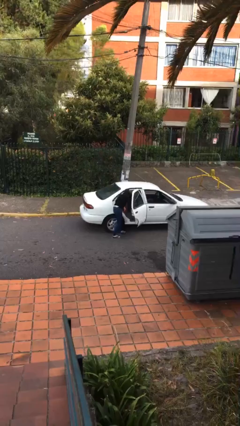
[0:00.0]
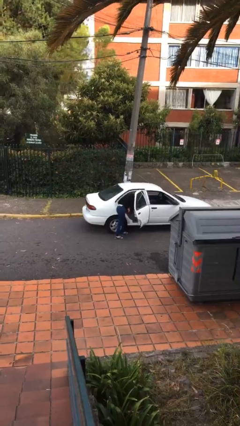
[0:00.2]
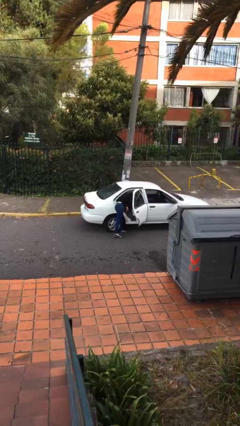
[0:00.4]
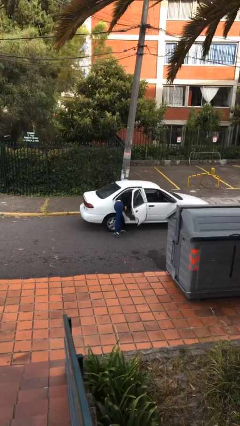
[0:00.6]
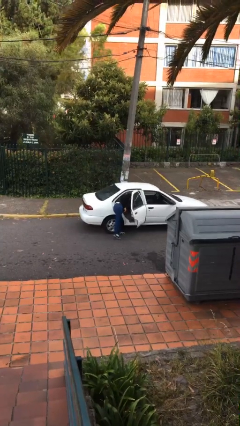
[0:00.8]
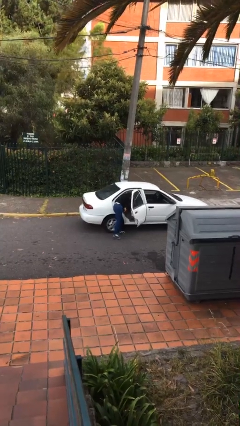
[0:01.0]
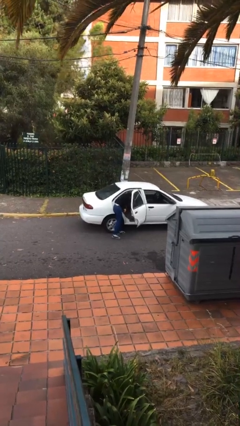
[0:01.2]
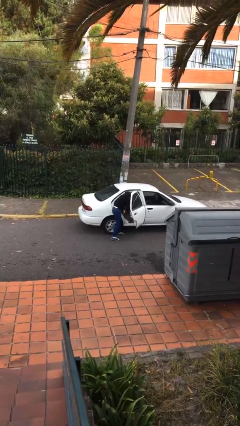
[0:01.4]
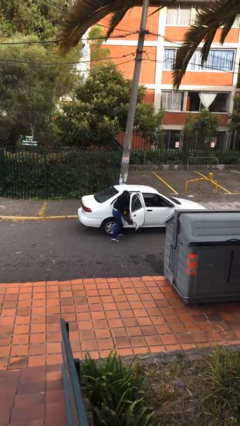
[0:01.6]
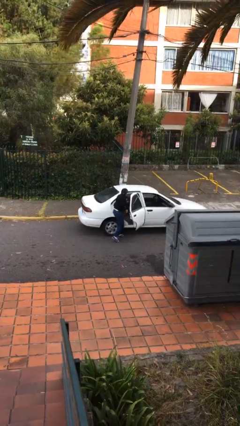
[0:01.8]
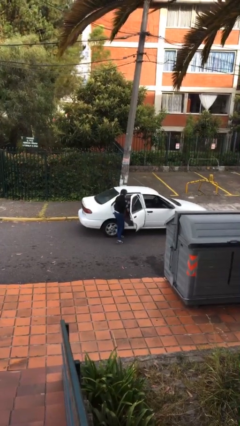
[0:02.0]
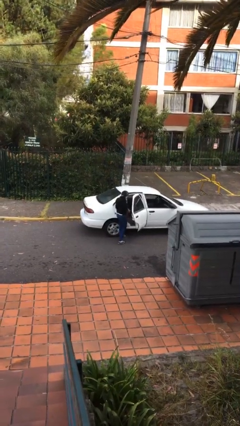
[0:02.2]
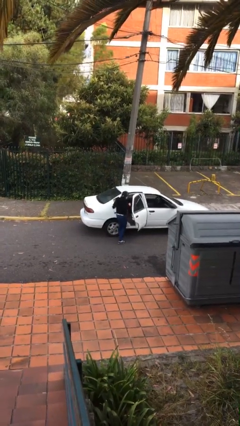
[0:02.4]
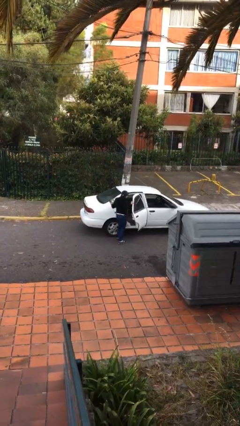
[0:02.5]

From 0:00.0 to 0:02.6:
person unloads car

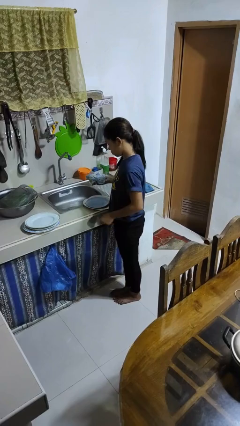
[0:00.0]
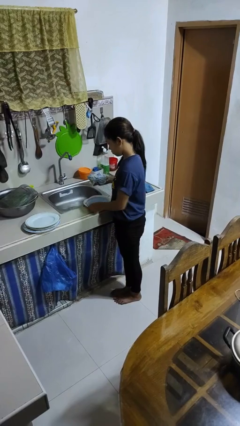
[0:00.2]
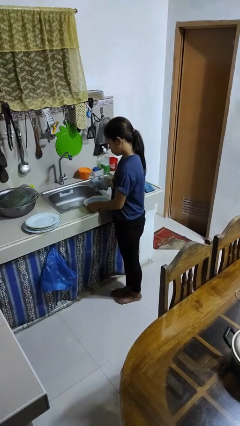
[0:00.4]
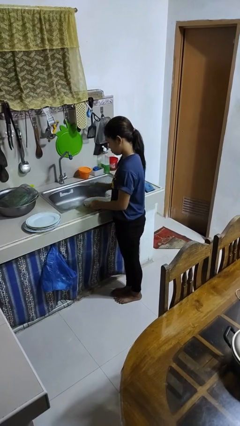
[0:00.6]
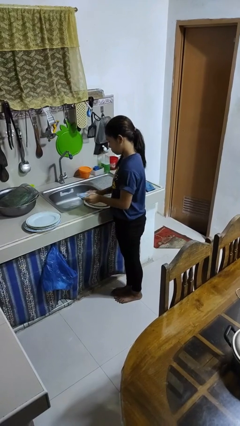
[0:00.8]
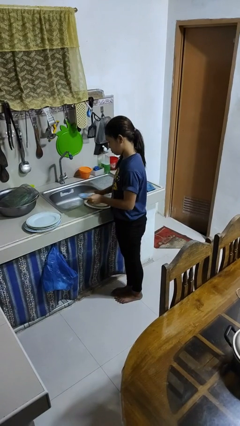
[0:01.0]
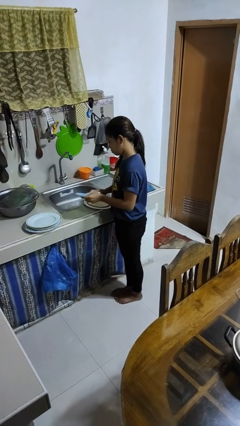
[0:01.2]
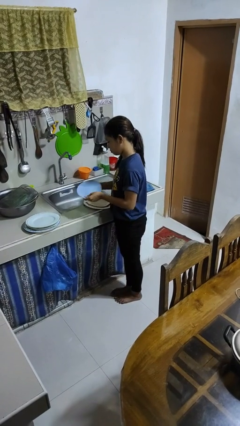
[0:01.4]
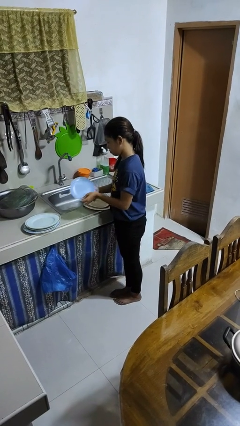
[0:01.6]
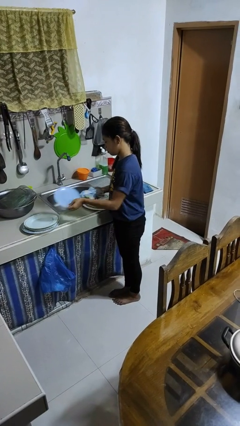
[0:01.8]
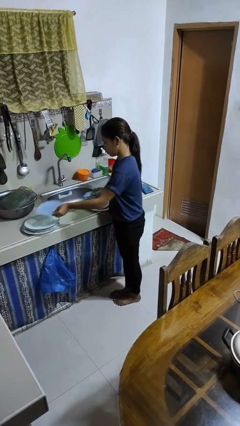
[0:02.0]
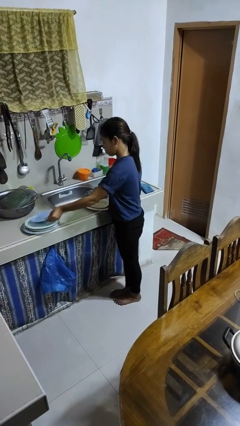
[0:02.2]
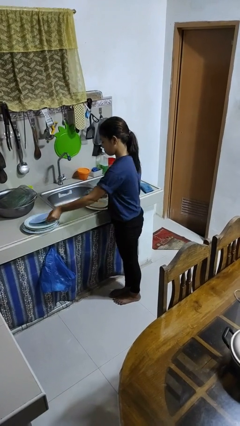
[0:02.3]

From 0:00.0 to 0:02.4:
person dries dish

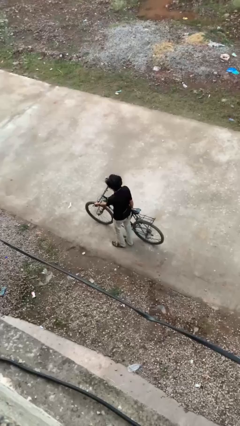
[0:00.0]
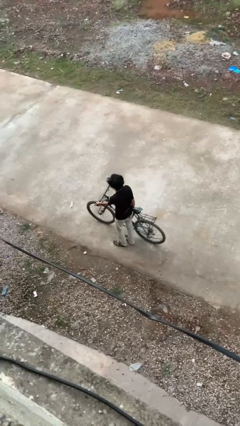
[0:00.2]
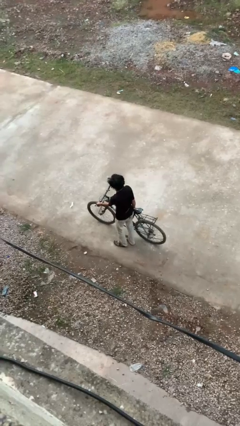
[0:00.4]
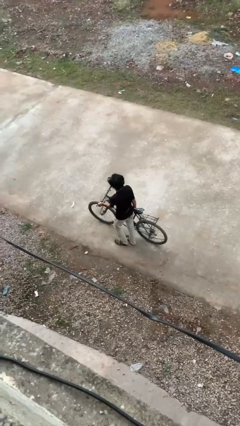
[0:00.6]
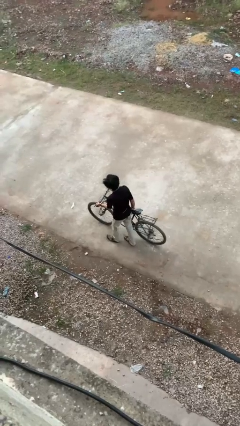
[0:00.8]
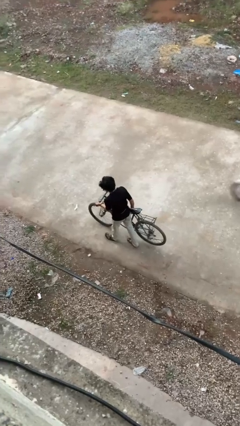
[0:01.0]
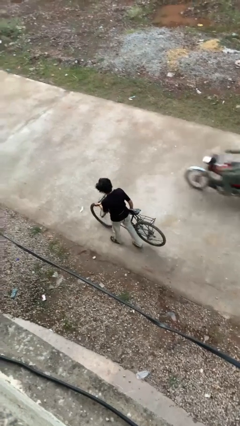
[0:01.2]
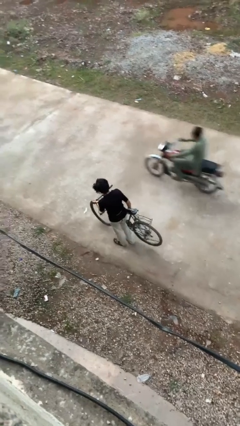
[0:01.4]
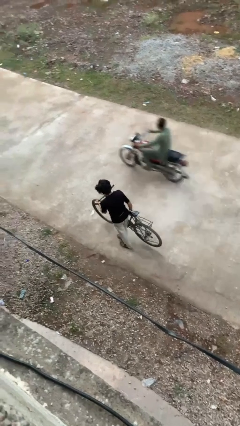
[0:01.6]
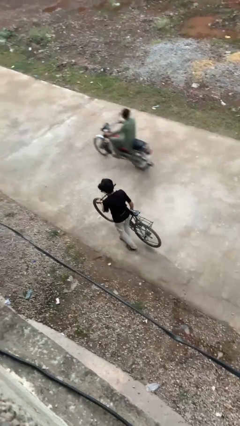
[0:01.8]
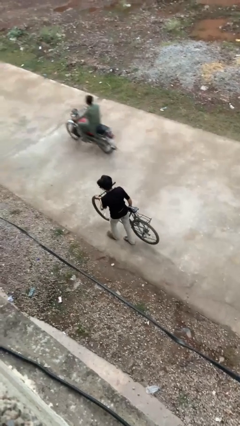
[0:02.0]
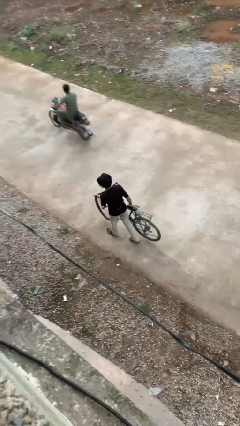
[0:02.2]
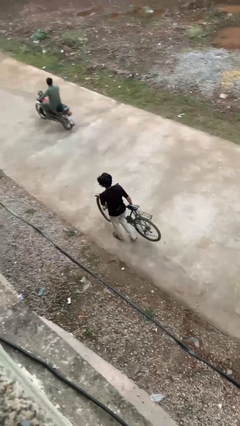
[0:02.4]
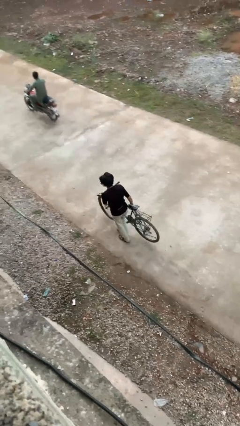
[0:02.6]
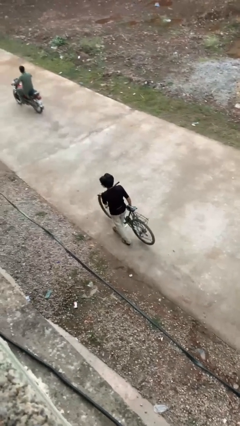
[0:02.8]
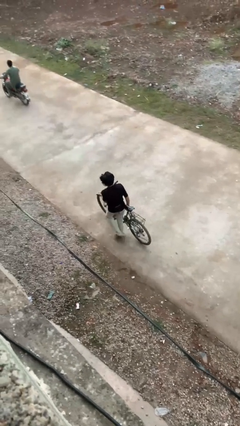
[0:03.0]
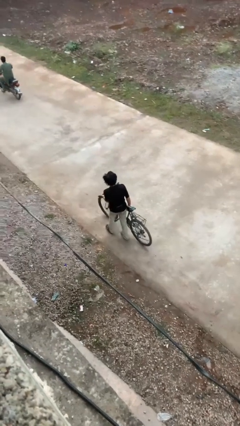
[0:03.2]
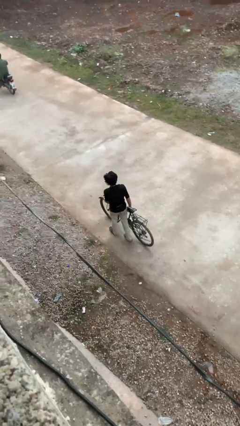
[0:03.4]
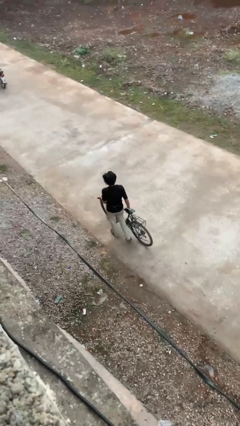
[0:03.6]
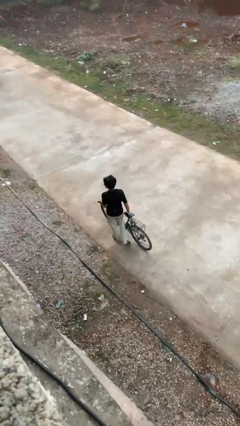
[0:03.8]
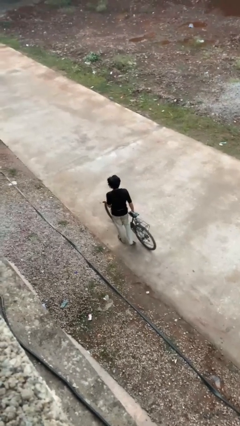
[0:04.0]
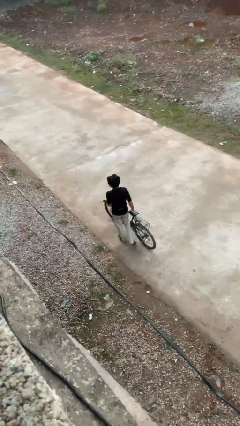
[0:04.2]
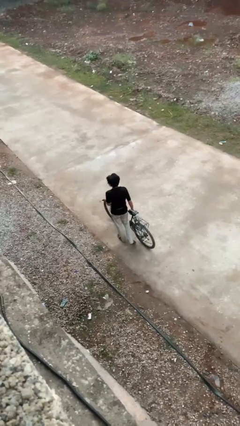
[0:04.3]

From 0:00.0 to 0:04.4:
person carries bicycle

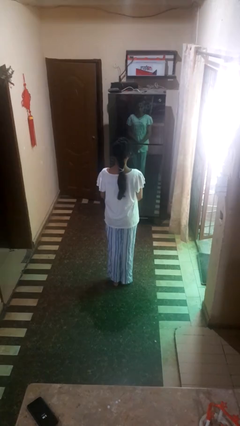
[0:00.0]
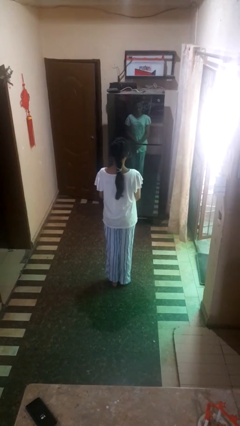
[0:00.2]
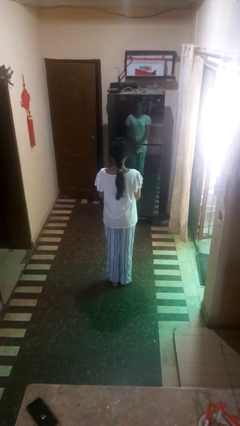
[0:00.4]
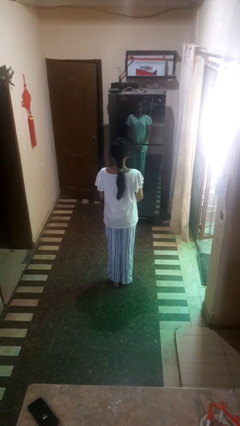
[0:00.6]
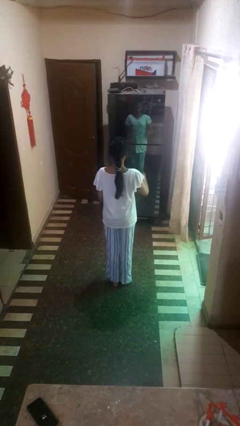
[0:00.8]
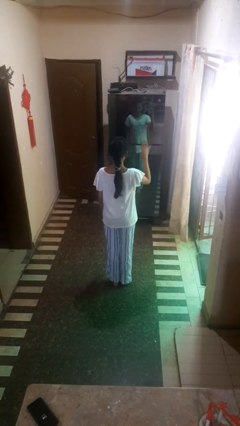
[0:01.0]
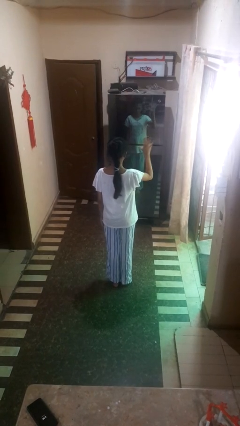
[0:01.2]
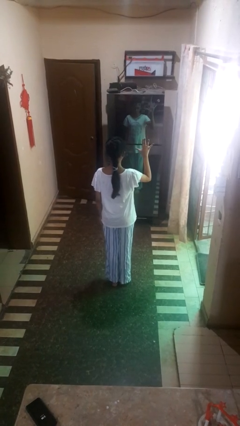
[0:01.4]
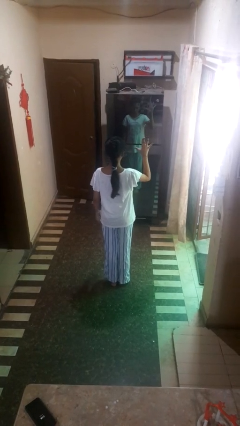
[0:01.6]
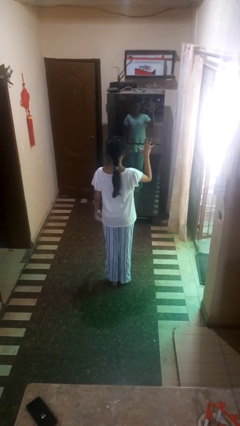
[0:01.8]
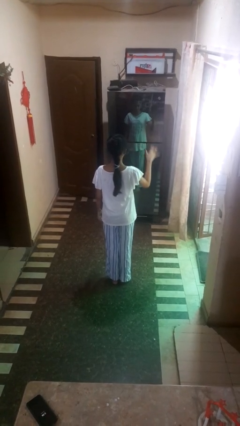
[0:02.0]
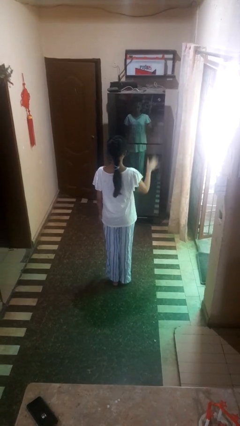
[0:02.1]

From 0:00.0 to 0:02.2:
person gestures number five

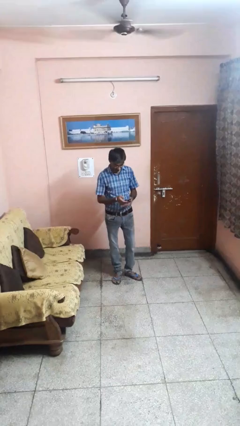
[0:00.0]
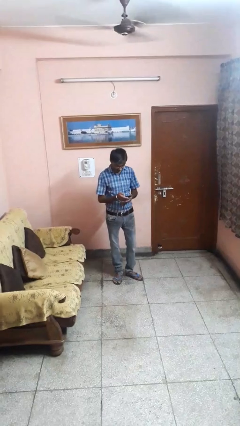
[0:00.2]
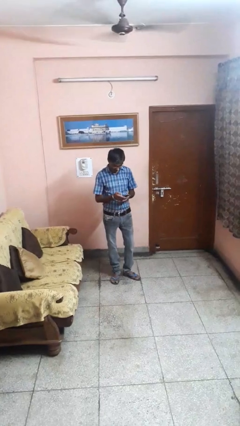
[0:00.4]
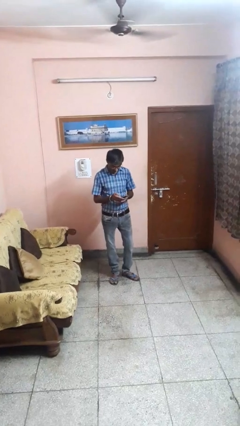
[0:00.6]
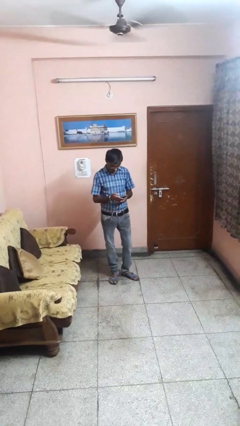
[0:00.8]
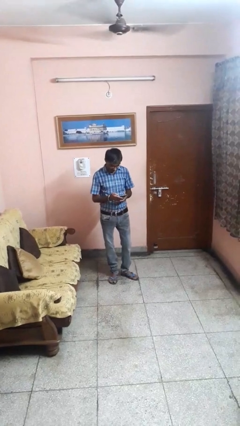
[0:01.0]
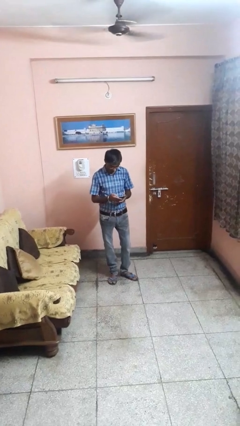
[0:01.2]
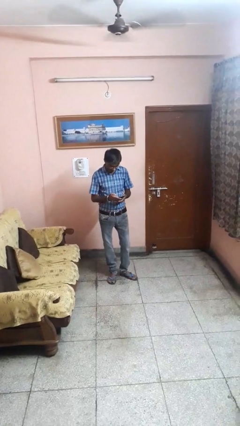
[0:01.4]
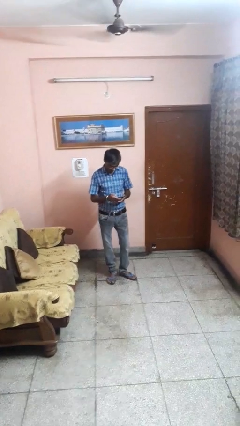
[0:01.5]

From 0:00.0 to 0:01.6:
person takes phone from pocket

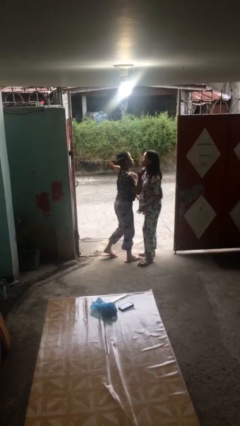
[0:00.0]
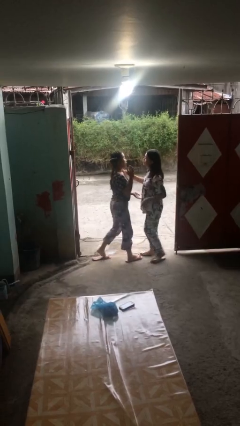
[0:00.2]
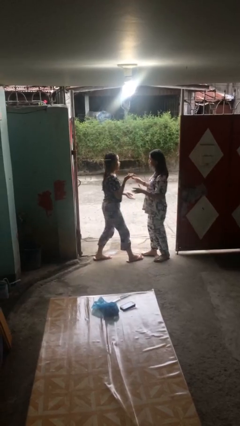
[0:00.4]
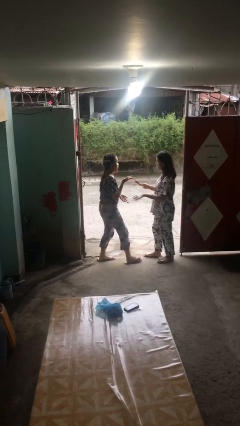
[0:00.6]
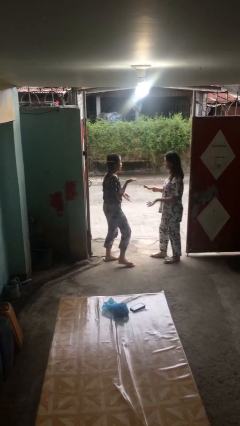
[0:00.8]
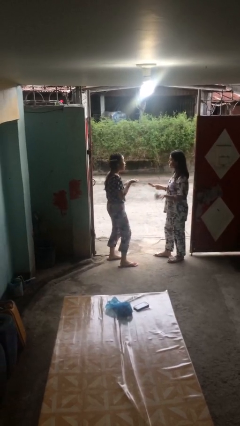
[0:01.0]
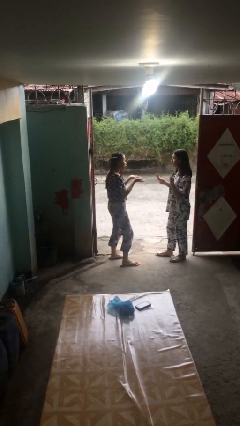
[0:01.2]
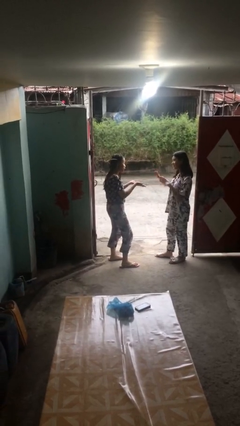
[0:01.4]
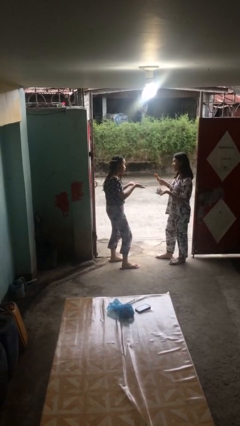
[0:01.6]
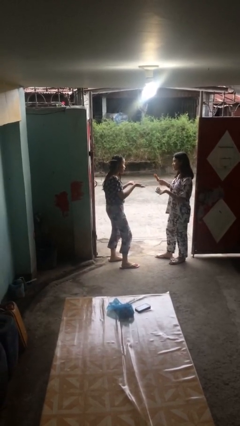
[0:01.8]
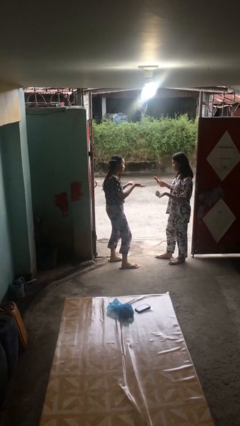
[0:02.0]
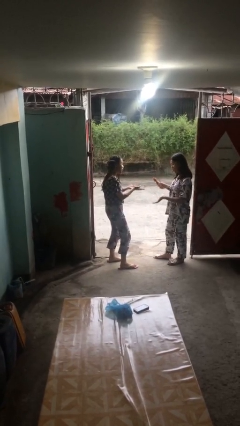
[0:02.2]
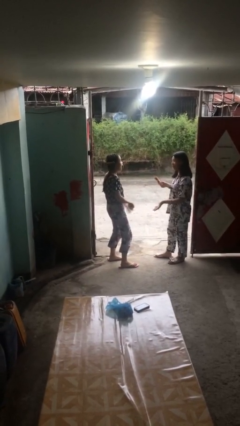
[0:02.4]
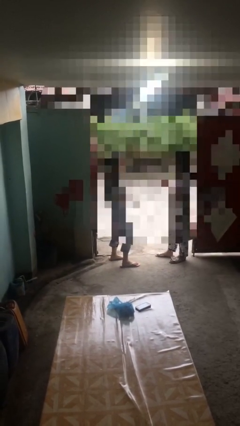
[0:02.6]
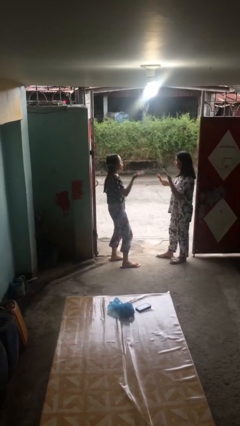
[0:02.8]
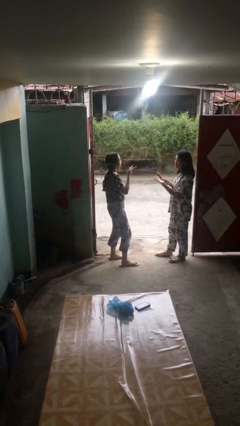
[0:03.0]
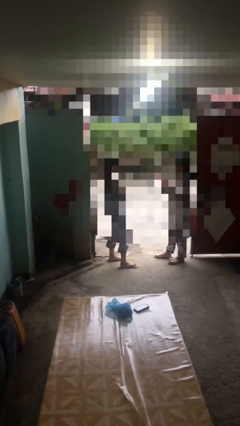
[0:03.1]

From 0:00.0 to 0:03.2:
person talks to person

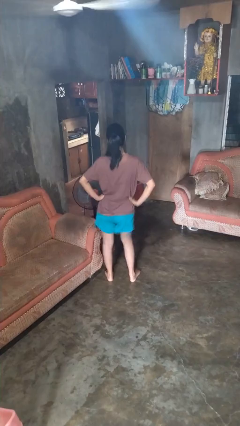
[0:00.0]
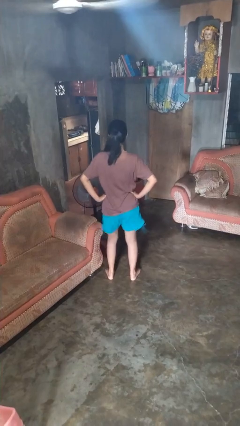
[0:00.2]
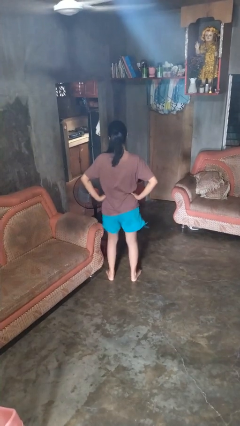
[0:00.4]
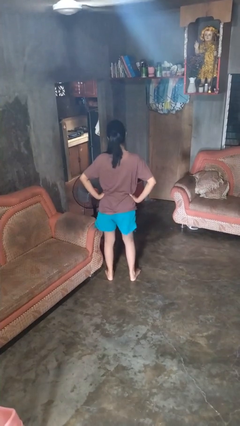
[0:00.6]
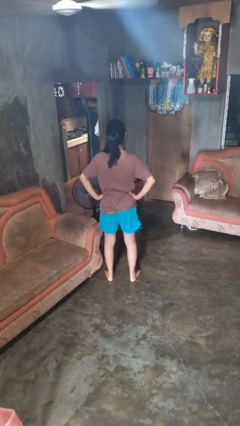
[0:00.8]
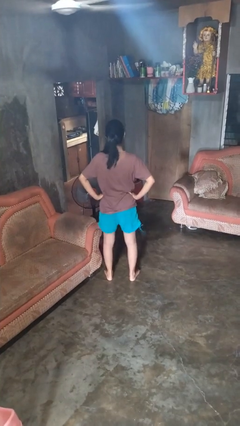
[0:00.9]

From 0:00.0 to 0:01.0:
person wiggles hips
